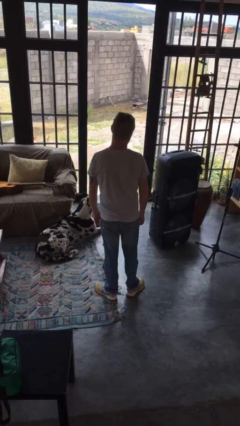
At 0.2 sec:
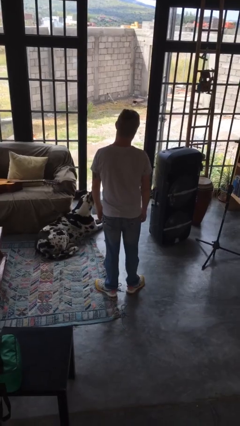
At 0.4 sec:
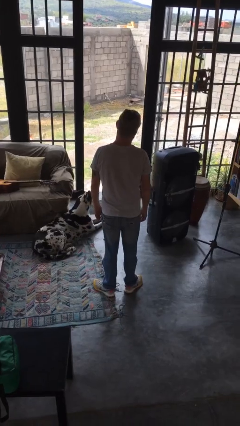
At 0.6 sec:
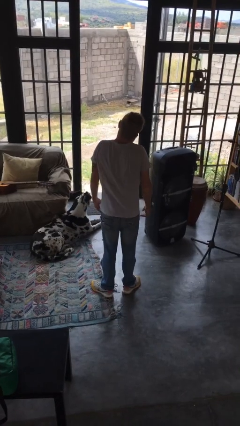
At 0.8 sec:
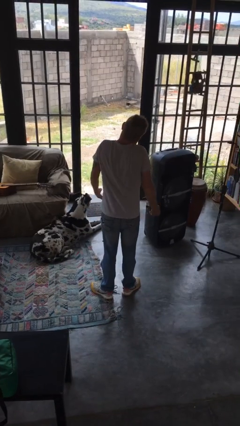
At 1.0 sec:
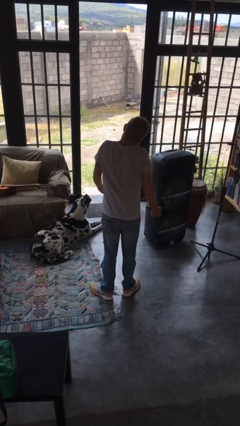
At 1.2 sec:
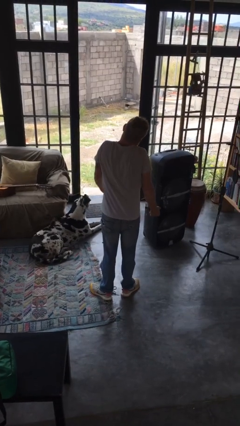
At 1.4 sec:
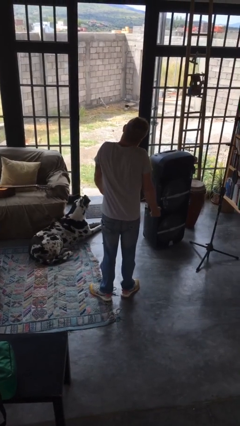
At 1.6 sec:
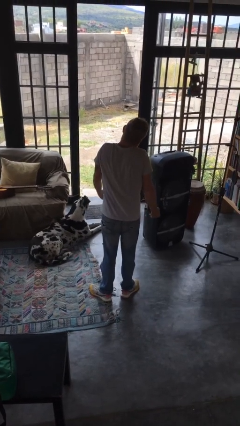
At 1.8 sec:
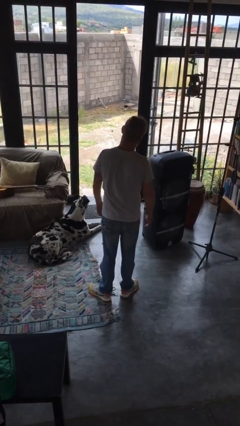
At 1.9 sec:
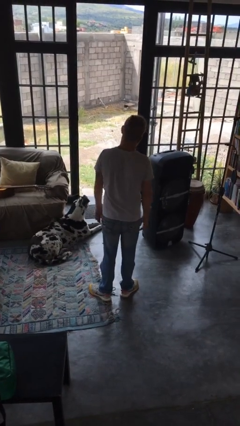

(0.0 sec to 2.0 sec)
person shrugs

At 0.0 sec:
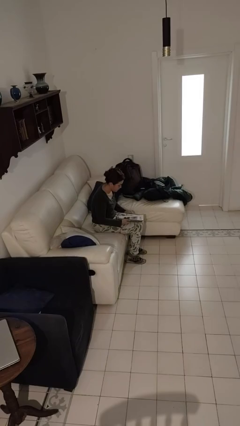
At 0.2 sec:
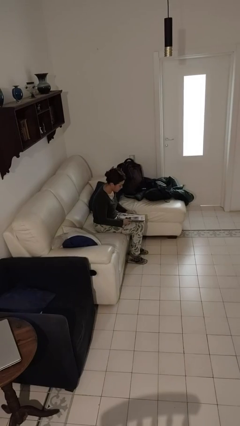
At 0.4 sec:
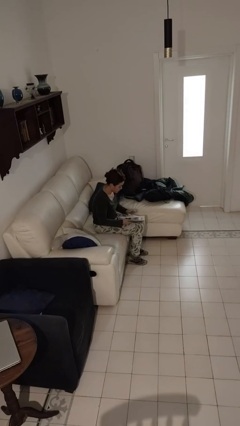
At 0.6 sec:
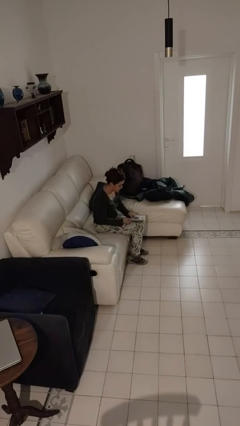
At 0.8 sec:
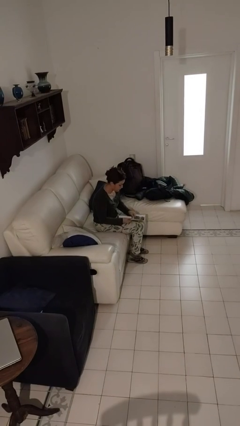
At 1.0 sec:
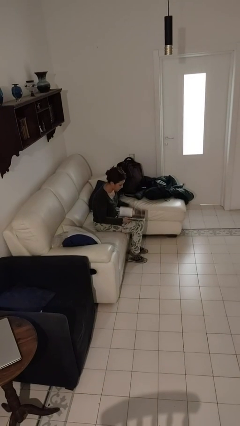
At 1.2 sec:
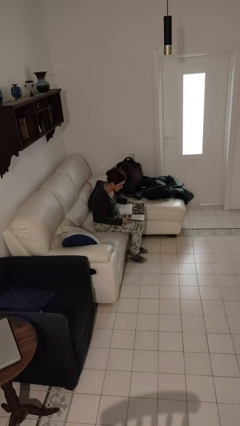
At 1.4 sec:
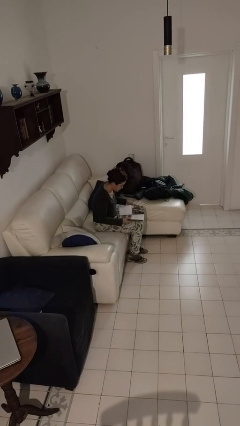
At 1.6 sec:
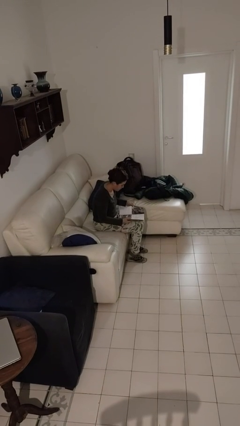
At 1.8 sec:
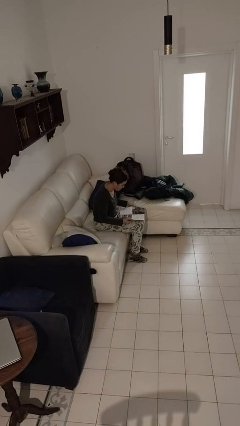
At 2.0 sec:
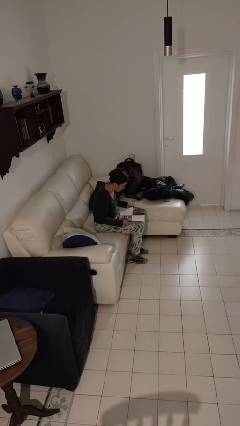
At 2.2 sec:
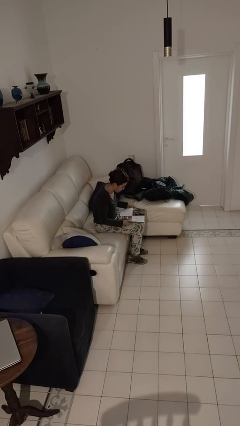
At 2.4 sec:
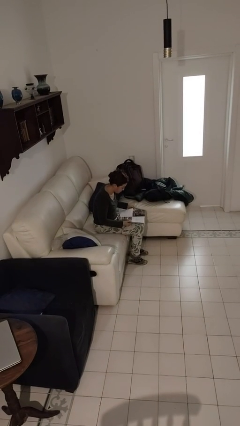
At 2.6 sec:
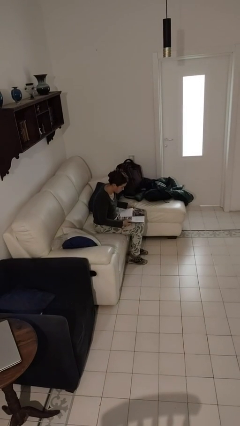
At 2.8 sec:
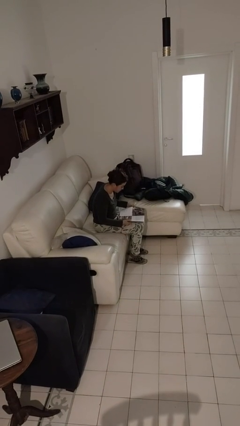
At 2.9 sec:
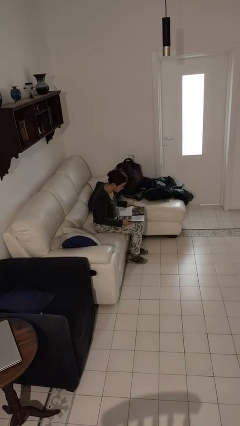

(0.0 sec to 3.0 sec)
person reads magazine

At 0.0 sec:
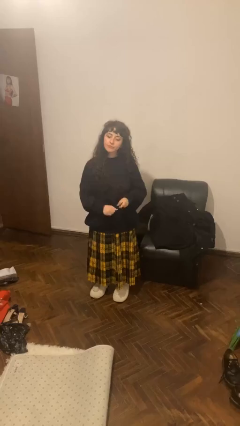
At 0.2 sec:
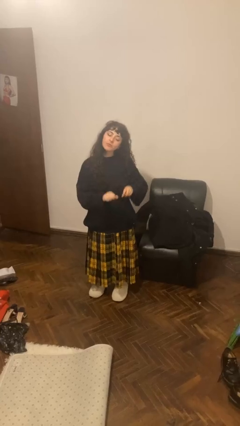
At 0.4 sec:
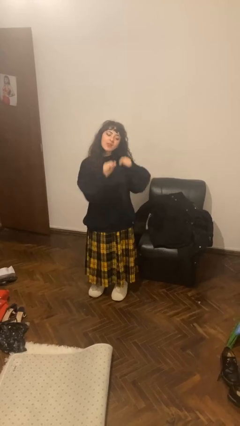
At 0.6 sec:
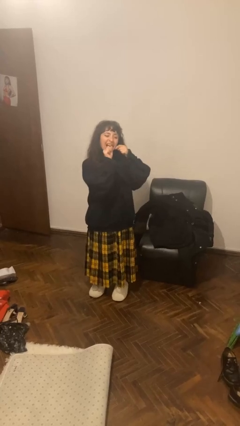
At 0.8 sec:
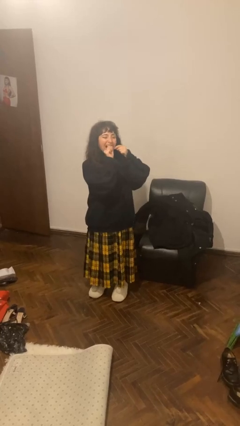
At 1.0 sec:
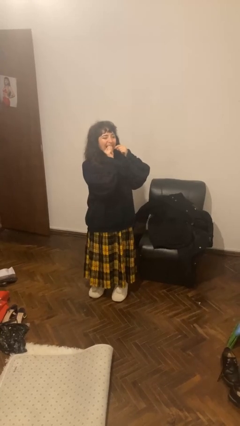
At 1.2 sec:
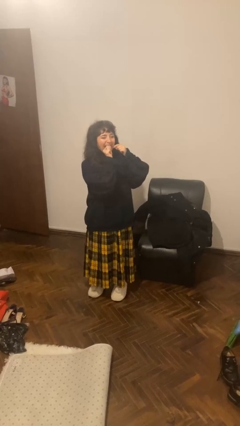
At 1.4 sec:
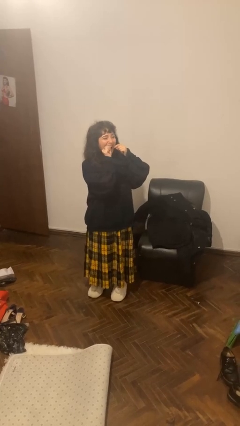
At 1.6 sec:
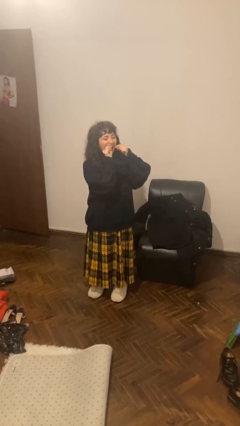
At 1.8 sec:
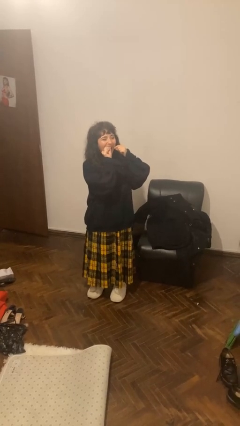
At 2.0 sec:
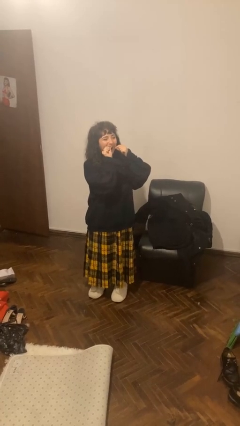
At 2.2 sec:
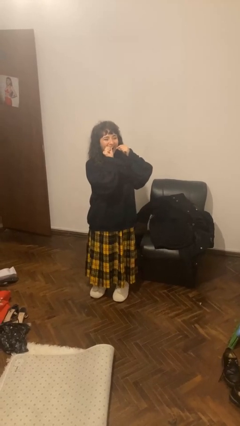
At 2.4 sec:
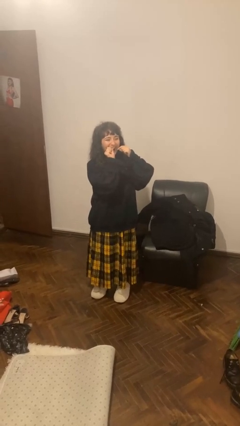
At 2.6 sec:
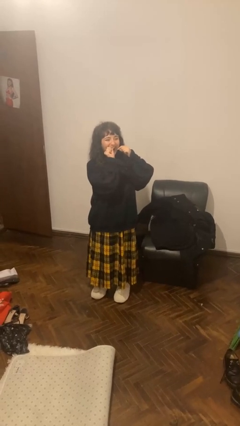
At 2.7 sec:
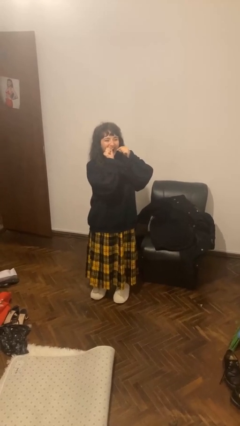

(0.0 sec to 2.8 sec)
person flosses

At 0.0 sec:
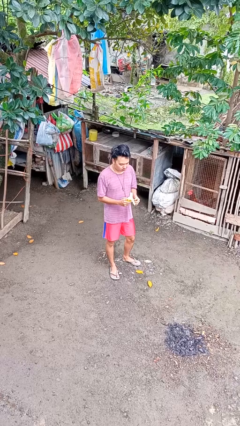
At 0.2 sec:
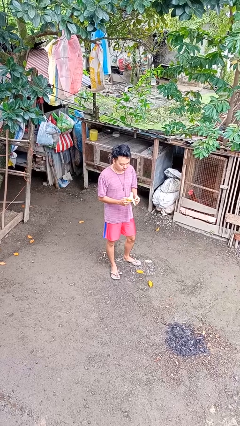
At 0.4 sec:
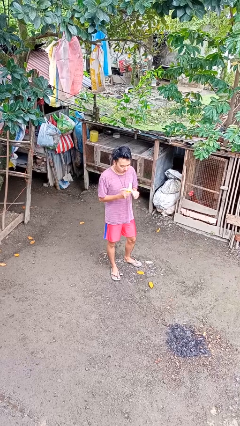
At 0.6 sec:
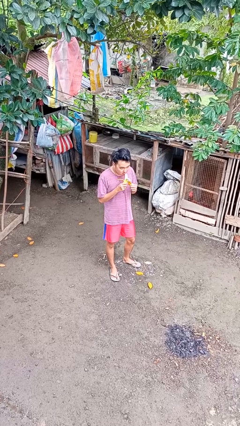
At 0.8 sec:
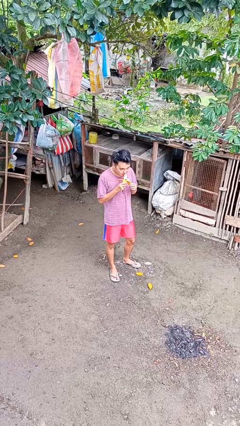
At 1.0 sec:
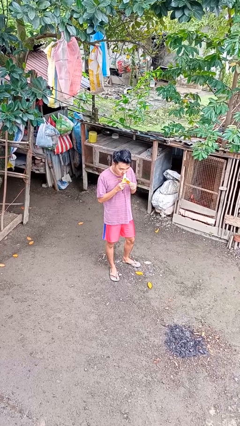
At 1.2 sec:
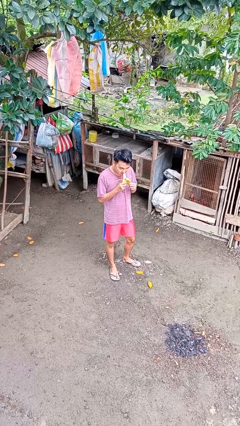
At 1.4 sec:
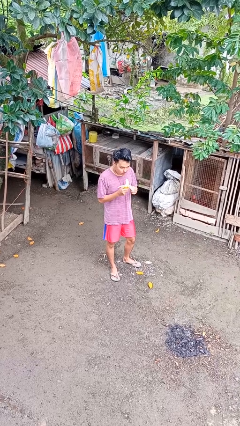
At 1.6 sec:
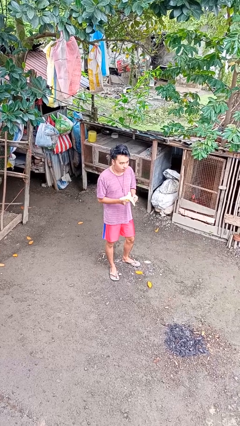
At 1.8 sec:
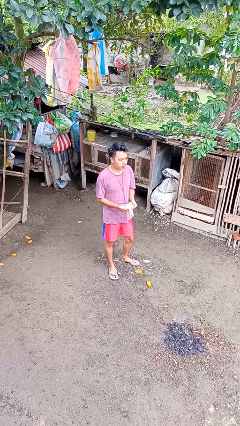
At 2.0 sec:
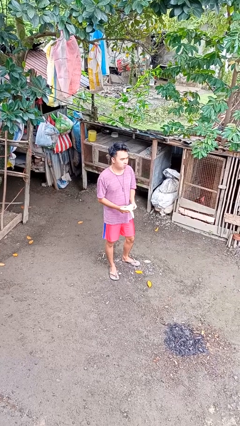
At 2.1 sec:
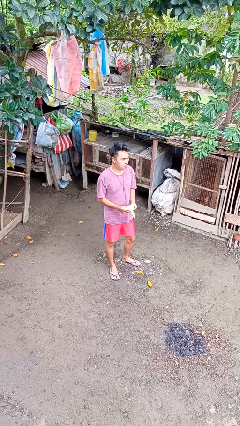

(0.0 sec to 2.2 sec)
person eats banana

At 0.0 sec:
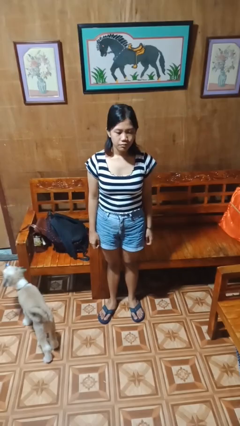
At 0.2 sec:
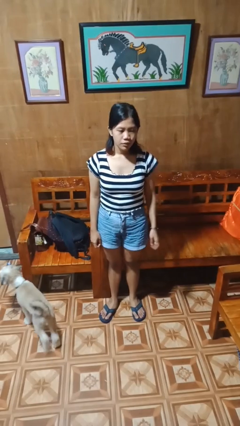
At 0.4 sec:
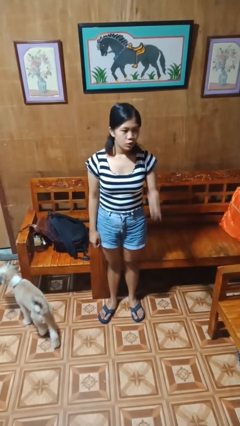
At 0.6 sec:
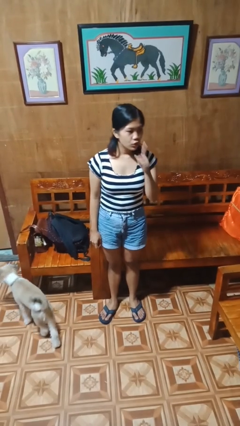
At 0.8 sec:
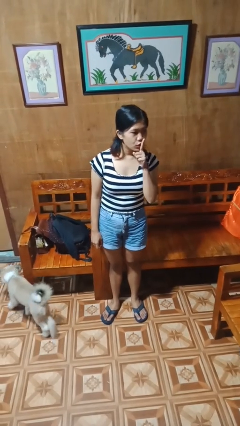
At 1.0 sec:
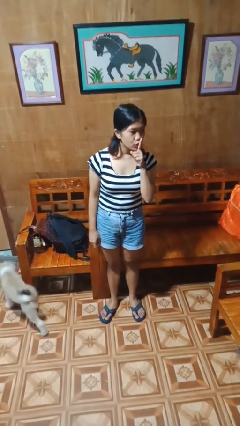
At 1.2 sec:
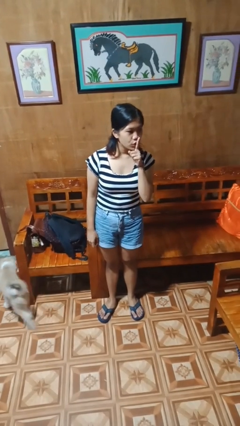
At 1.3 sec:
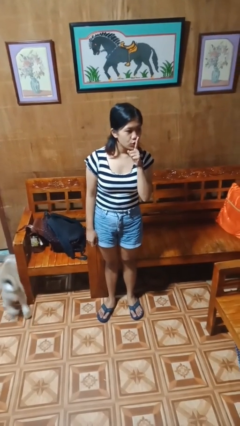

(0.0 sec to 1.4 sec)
person gestures be quiet

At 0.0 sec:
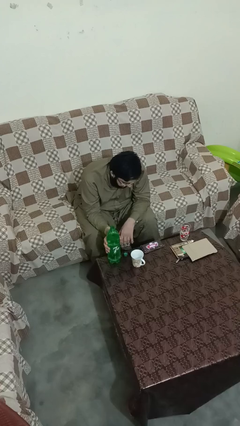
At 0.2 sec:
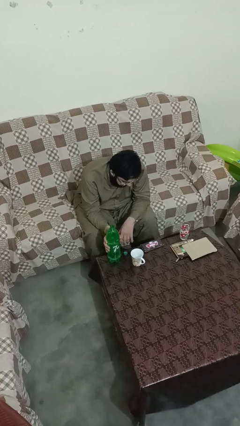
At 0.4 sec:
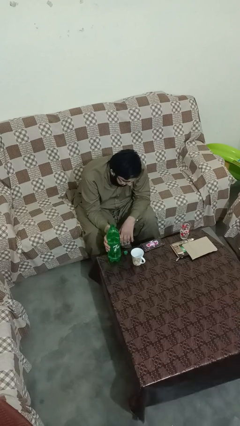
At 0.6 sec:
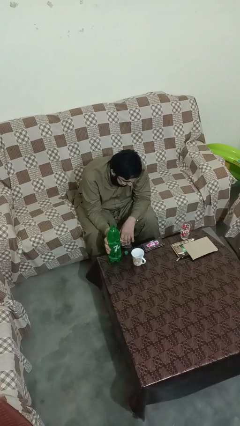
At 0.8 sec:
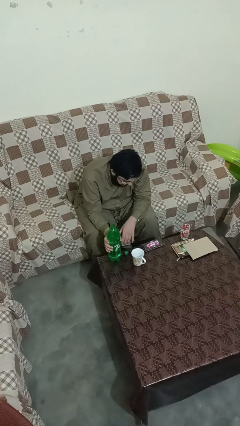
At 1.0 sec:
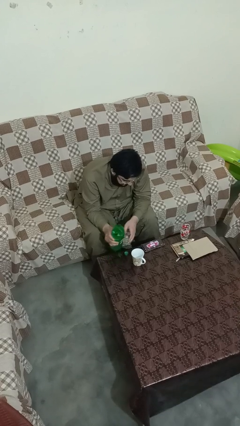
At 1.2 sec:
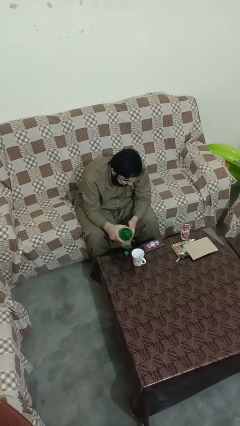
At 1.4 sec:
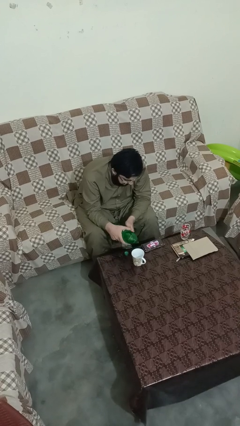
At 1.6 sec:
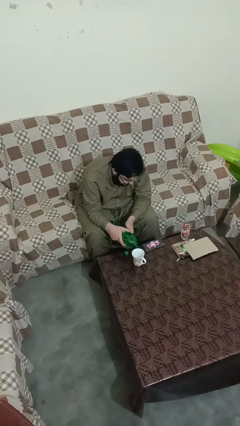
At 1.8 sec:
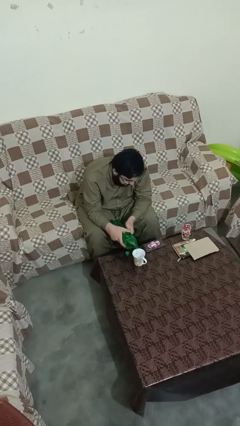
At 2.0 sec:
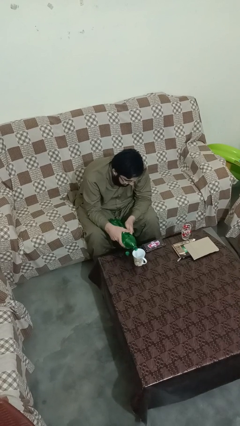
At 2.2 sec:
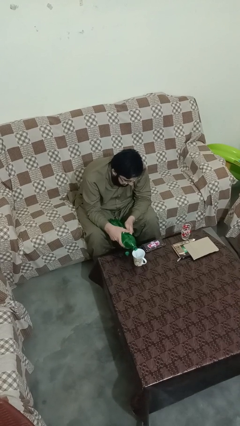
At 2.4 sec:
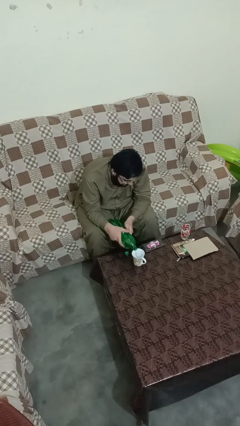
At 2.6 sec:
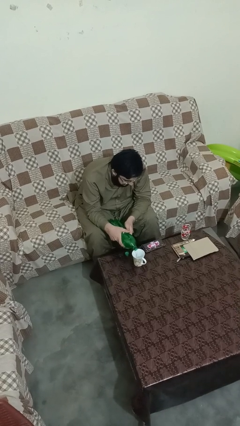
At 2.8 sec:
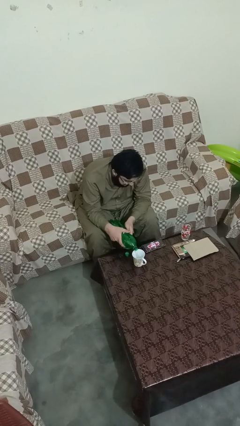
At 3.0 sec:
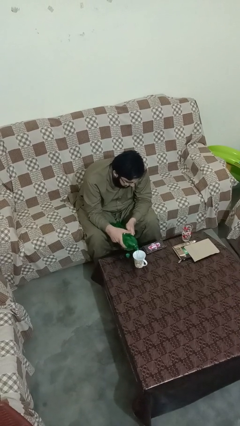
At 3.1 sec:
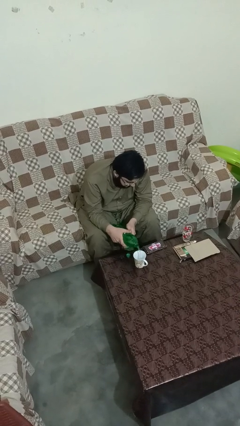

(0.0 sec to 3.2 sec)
person pours liquid into cup

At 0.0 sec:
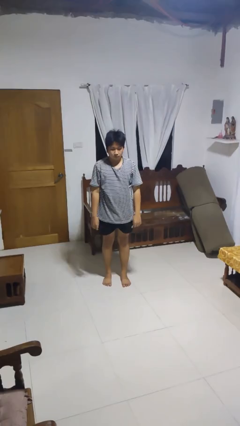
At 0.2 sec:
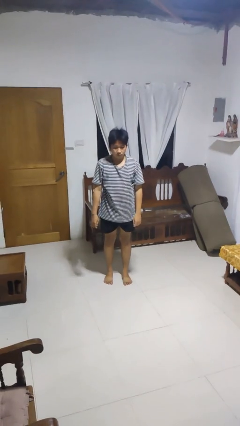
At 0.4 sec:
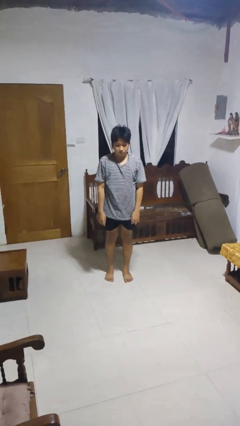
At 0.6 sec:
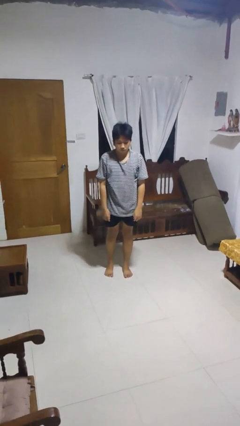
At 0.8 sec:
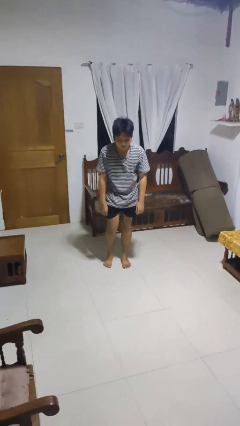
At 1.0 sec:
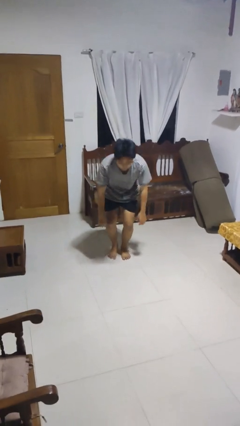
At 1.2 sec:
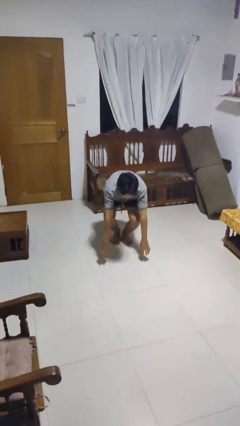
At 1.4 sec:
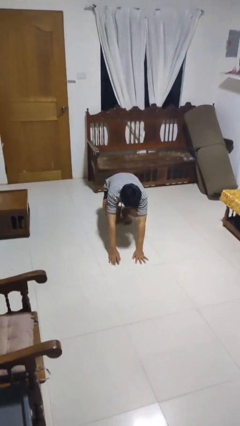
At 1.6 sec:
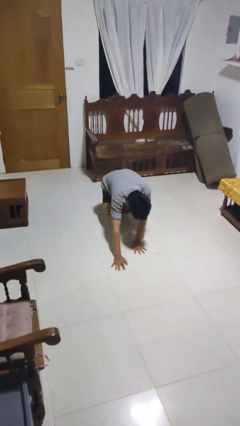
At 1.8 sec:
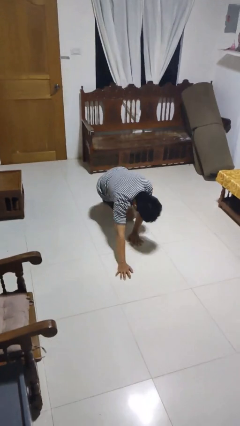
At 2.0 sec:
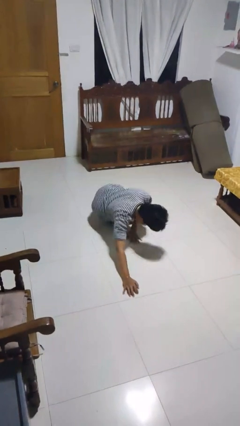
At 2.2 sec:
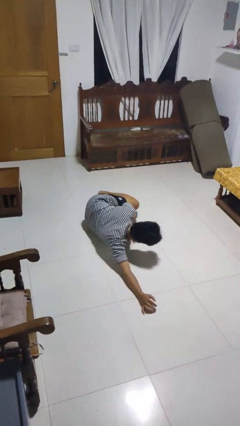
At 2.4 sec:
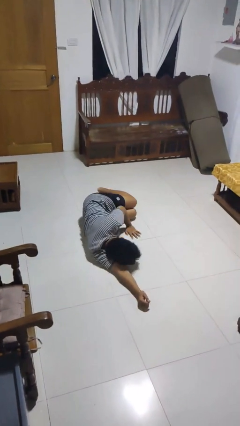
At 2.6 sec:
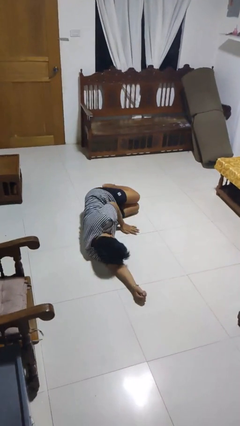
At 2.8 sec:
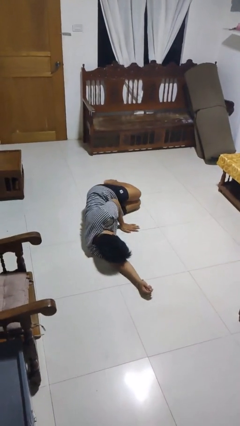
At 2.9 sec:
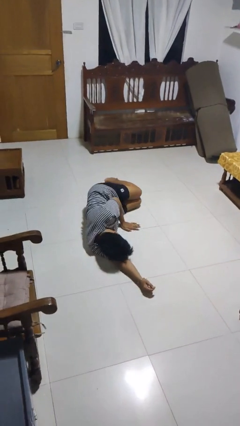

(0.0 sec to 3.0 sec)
person falls while standing
